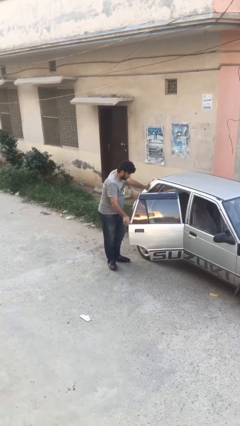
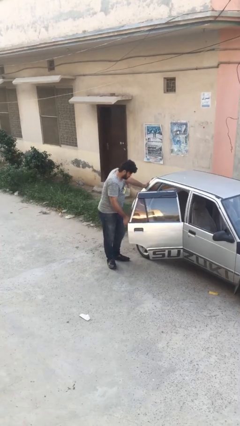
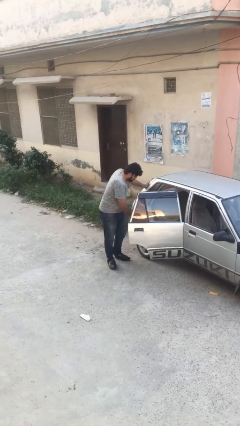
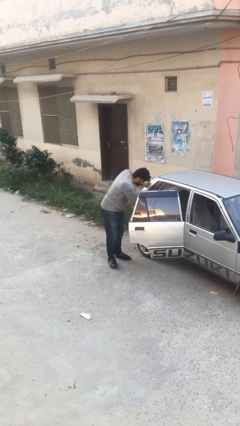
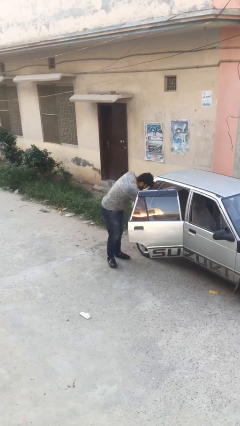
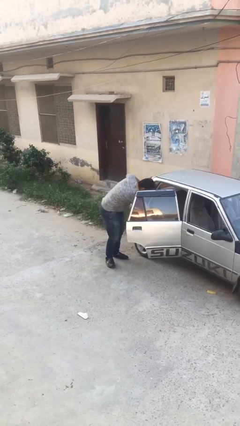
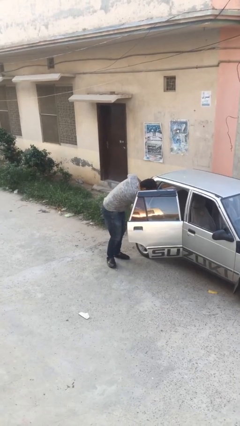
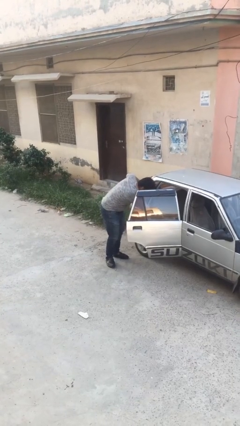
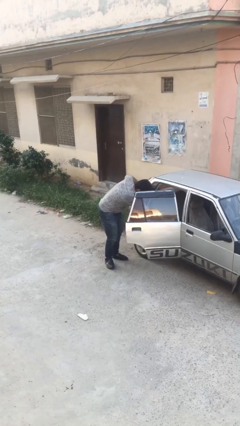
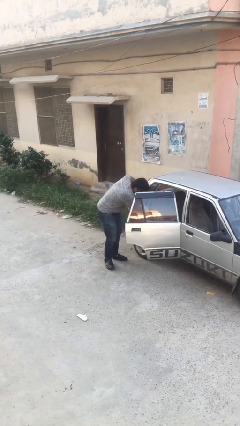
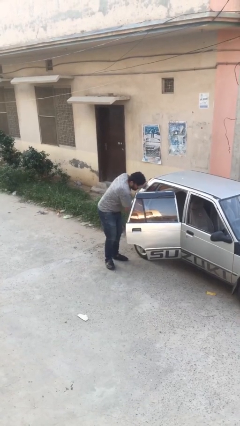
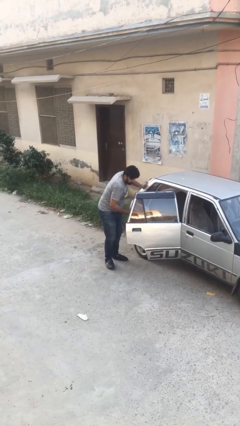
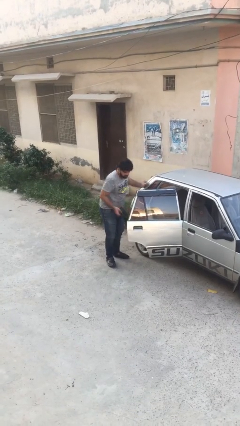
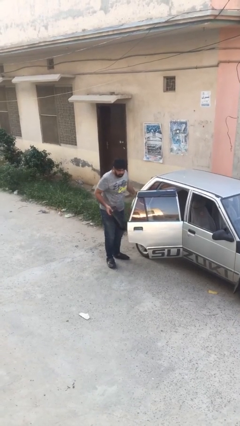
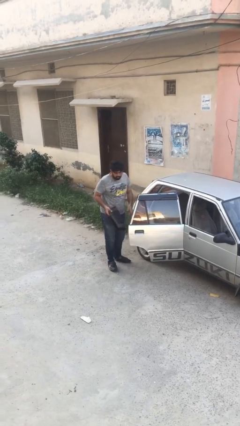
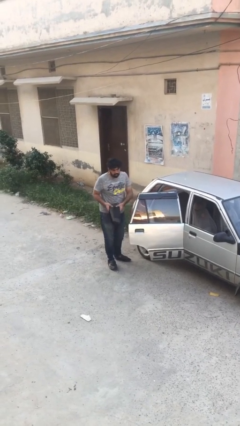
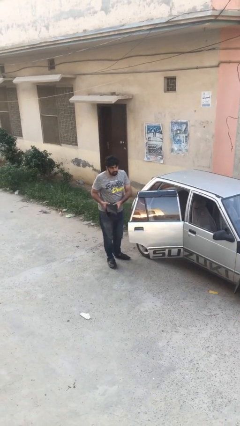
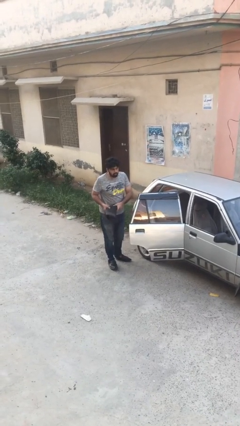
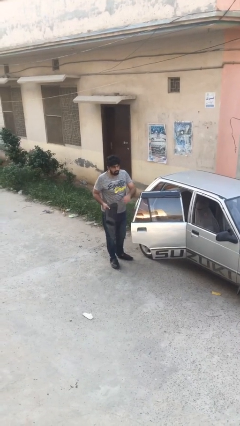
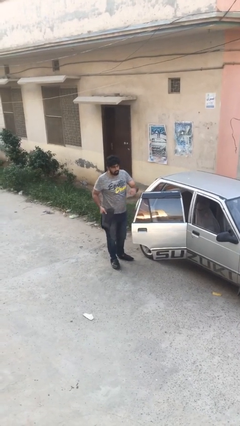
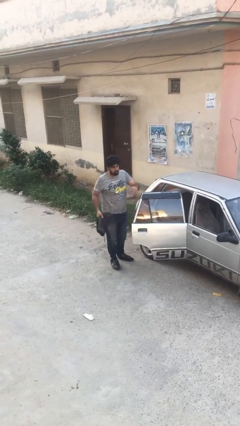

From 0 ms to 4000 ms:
person unloads car

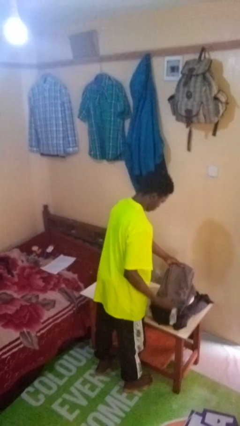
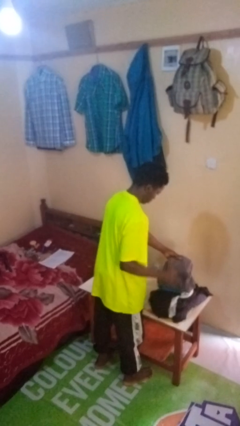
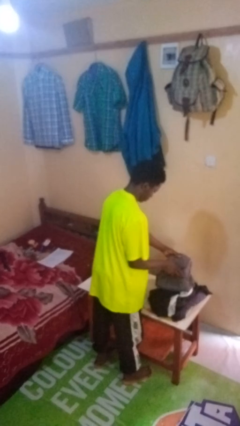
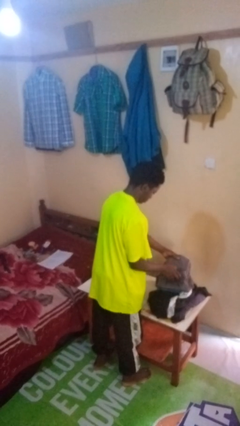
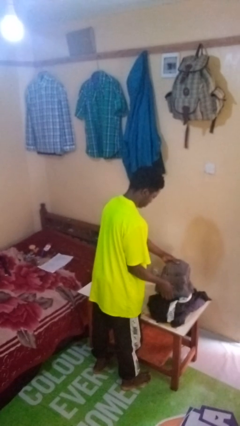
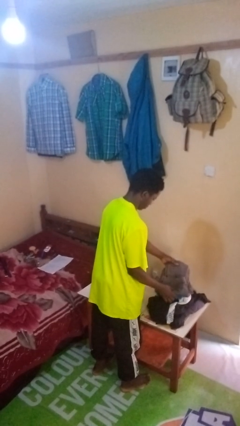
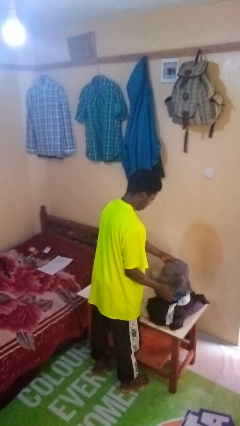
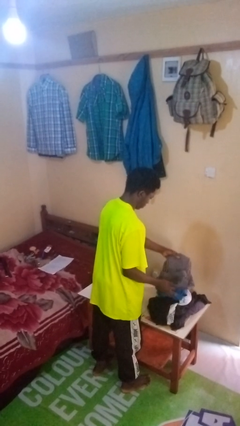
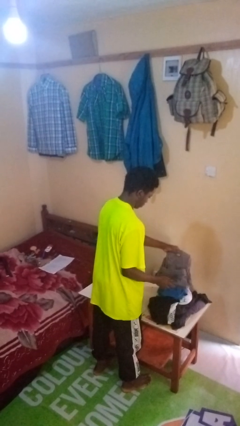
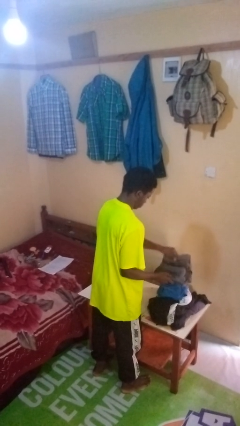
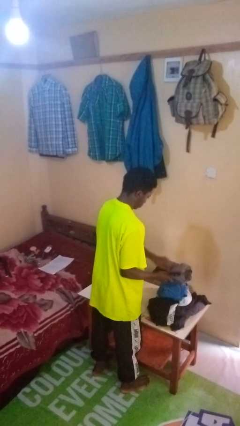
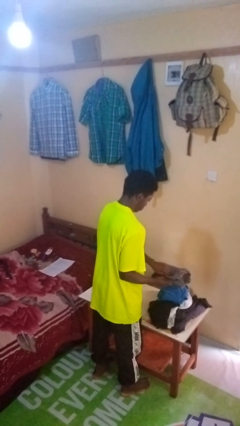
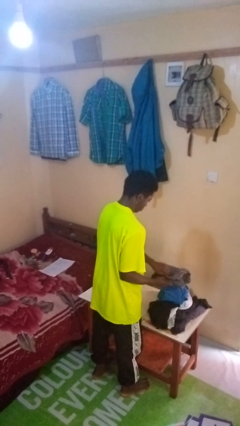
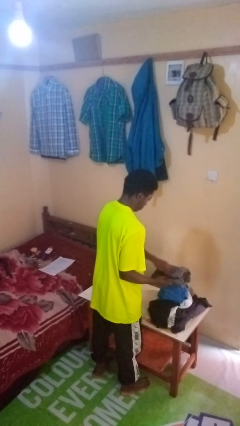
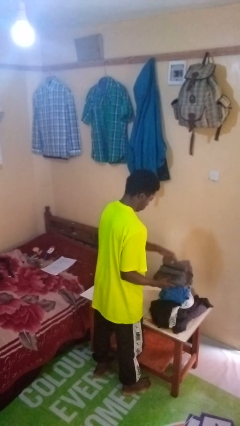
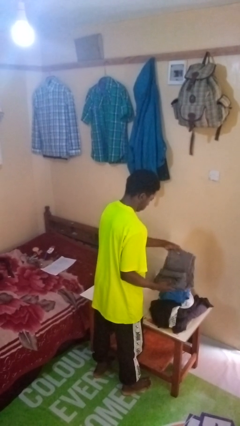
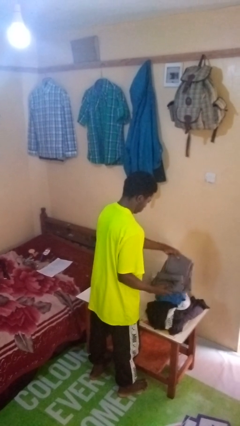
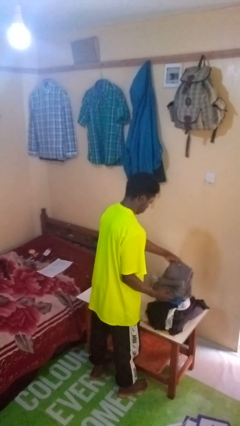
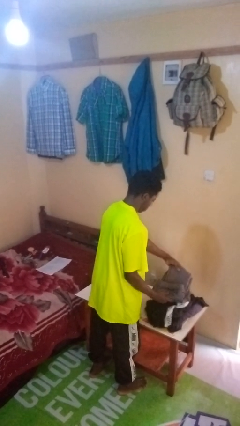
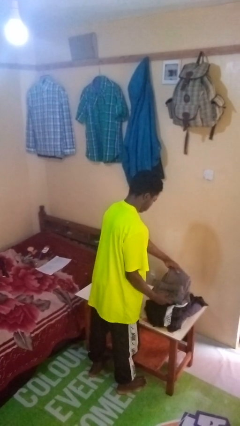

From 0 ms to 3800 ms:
person folds pants

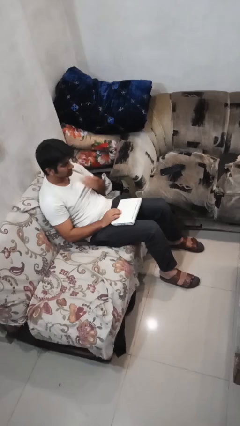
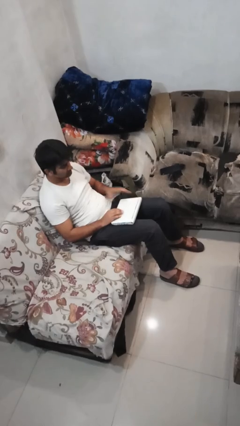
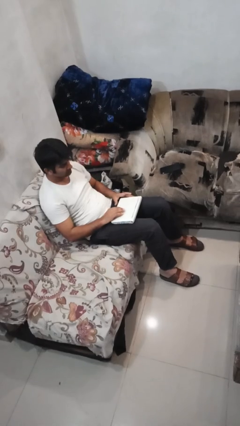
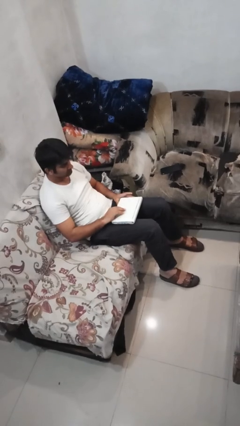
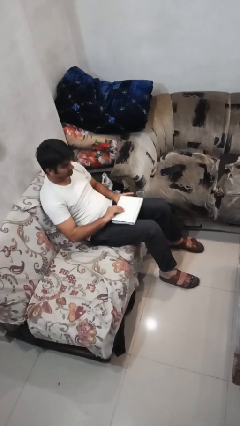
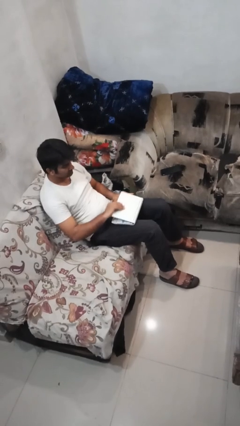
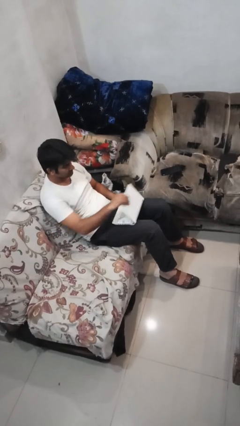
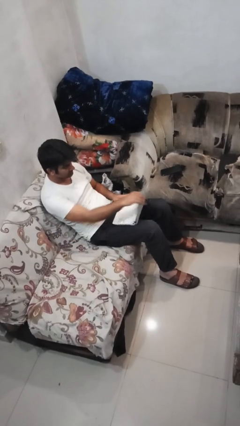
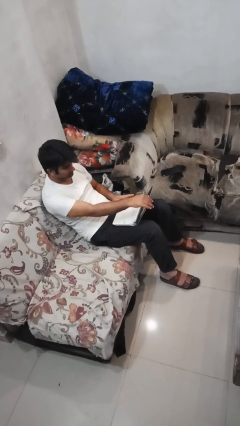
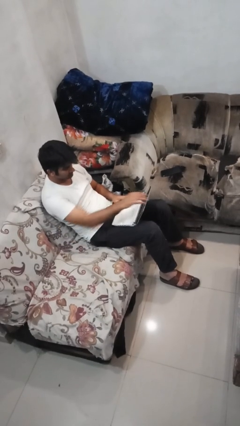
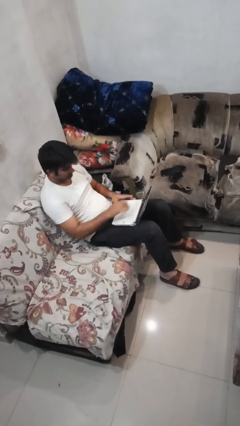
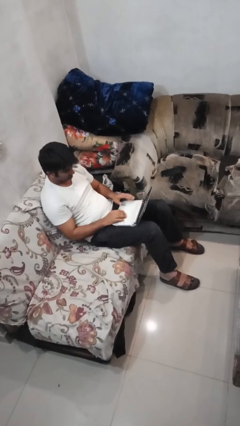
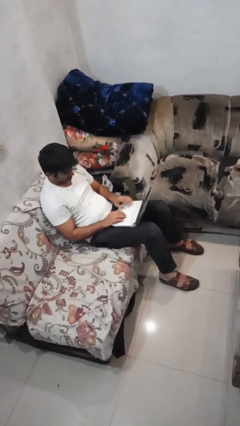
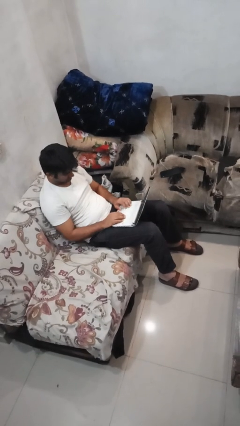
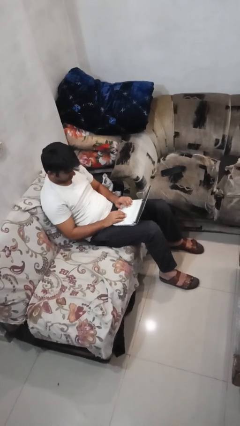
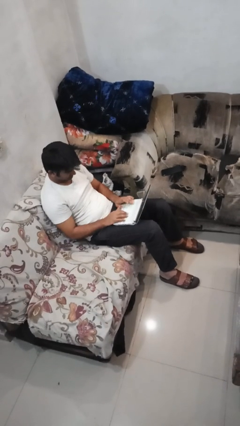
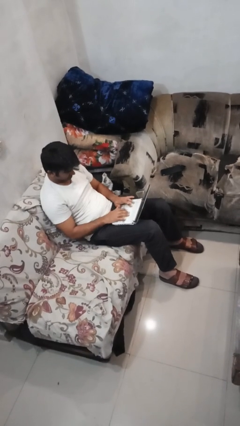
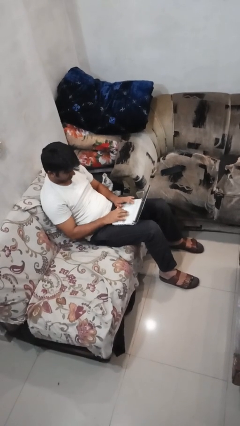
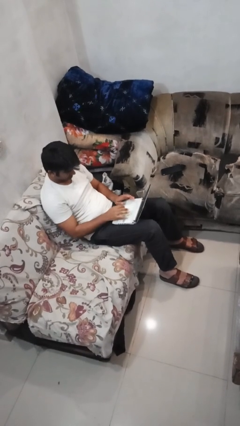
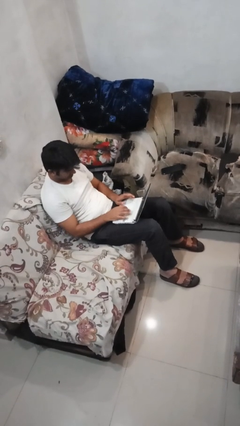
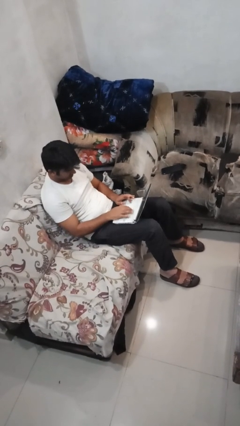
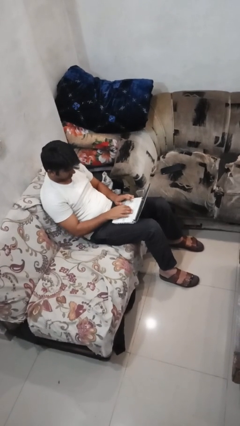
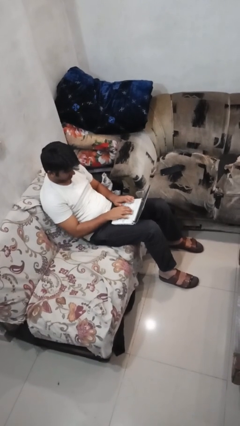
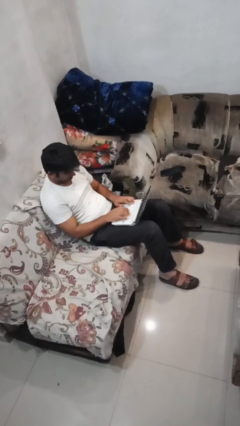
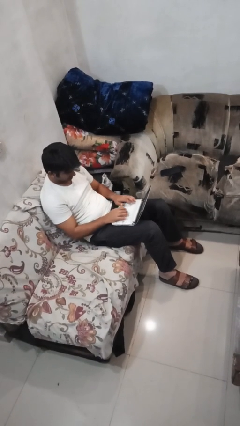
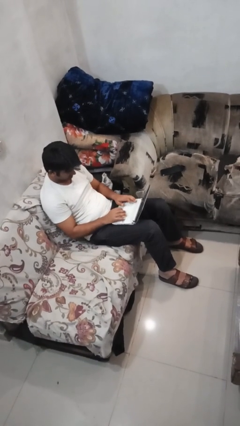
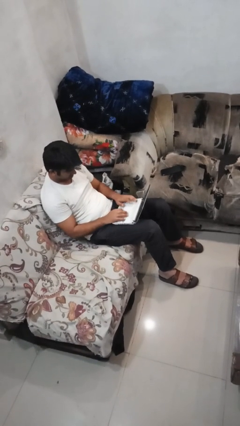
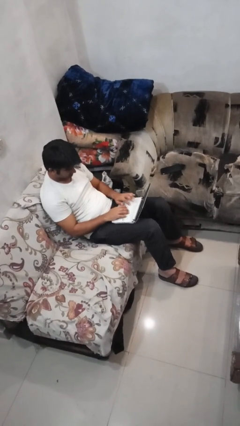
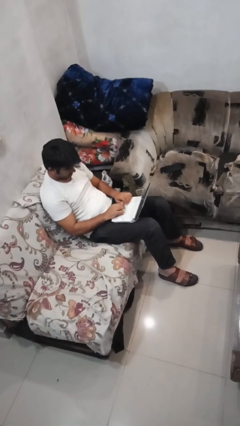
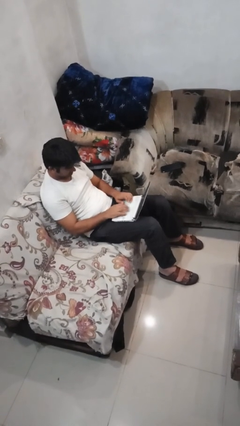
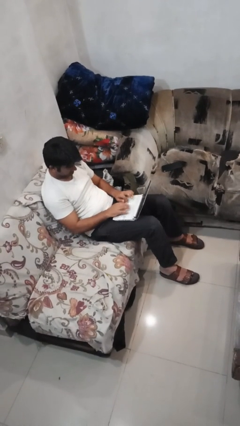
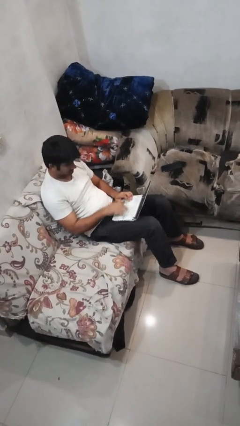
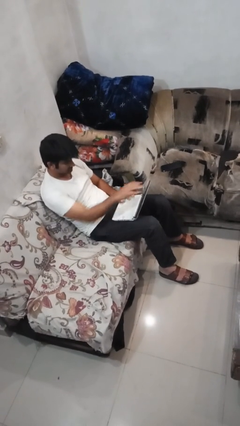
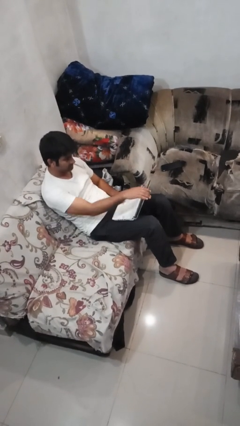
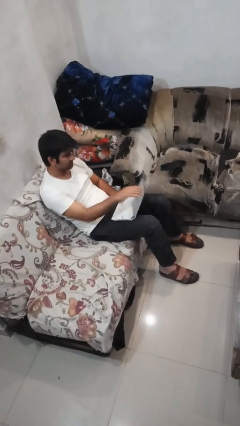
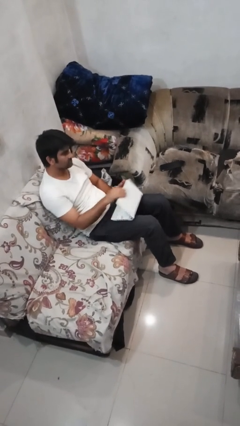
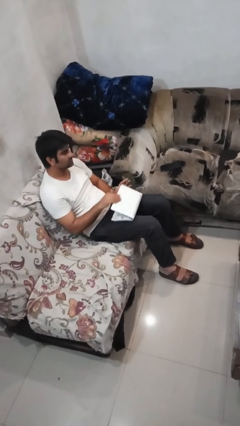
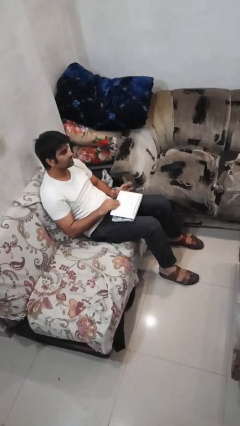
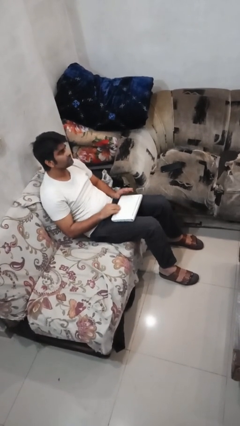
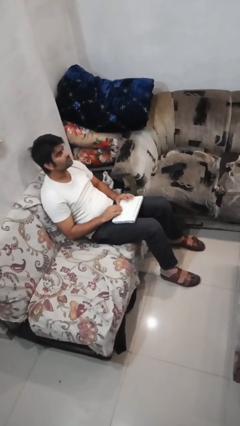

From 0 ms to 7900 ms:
person interacts with laptop

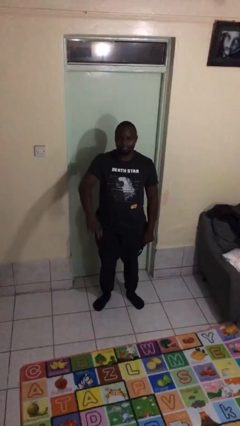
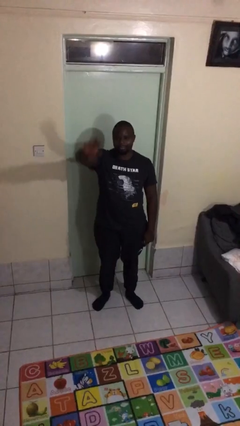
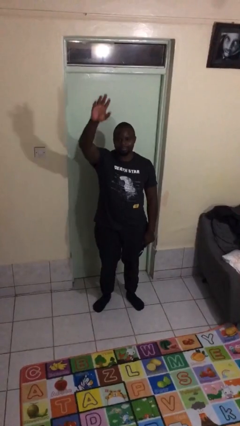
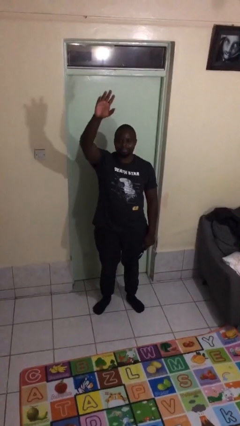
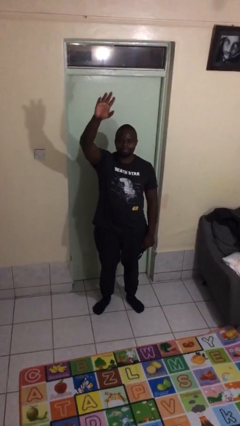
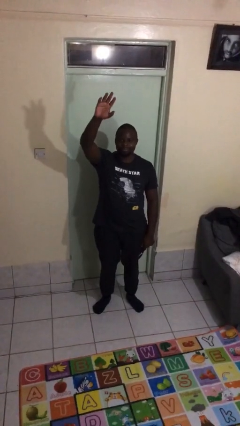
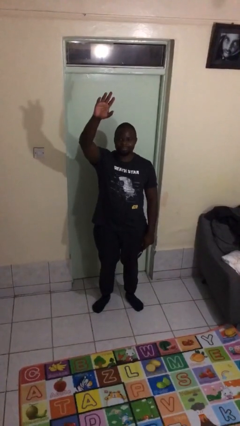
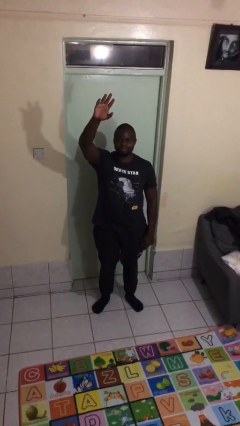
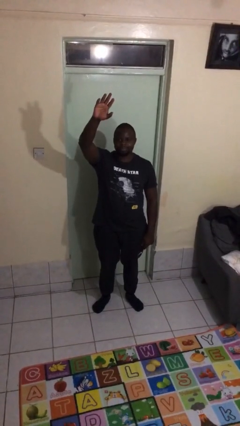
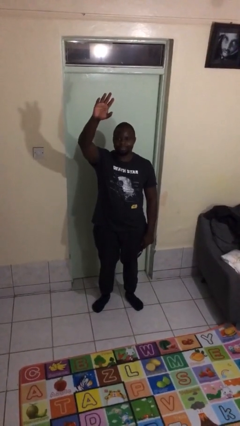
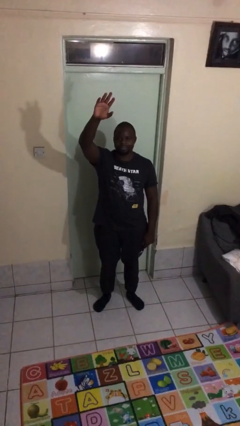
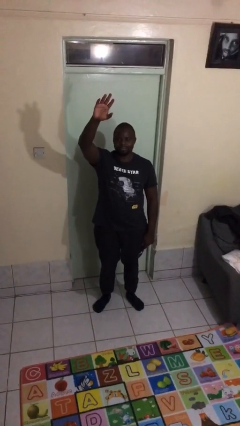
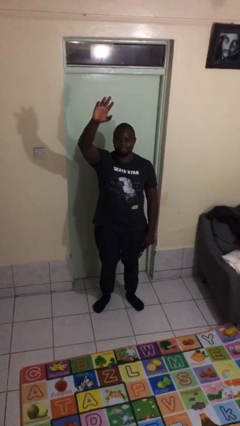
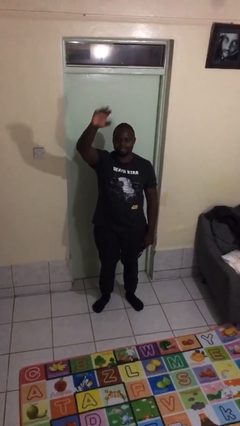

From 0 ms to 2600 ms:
person gestures raise hand
